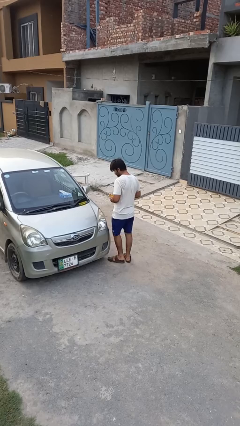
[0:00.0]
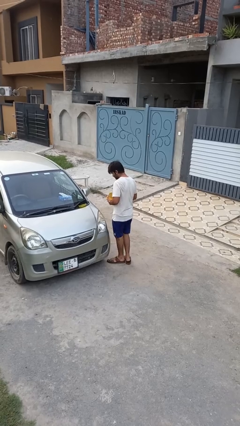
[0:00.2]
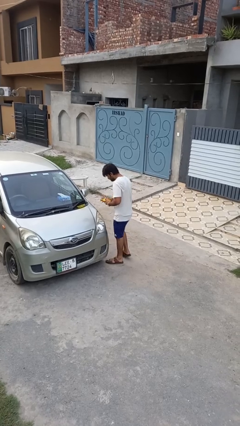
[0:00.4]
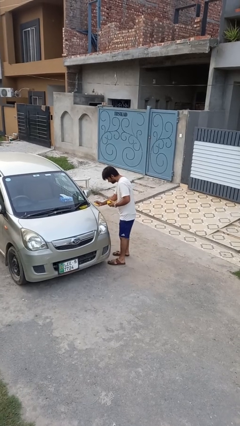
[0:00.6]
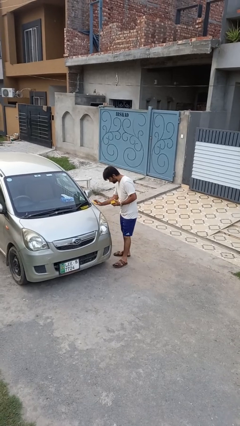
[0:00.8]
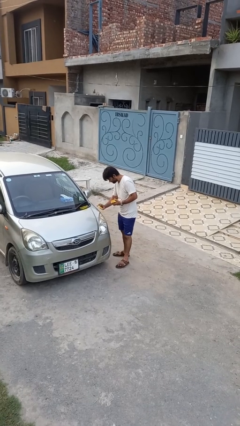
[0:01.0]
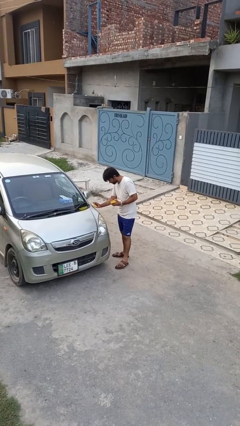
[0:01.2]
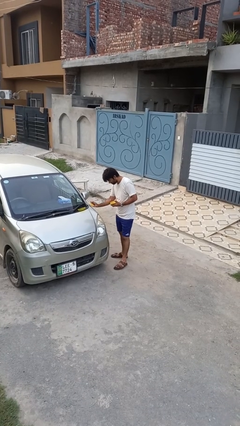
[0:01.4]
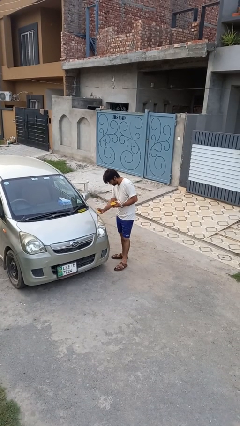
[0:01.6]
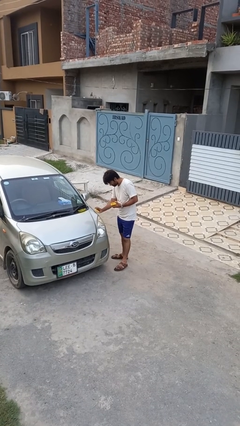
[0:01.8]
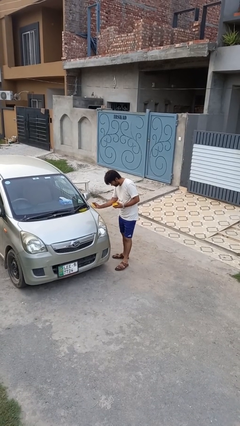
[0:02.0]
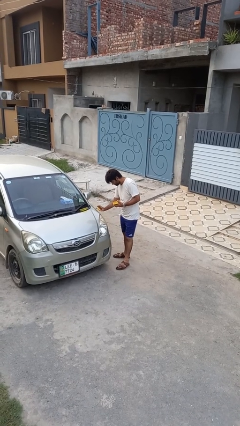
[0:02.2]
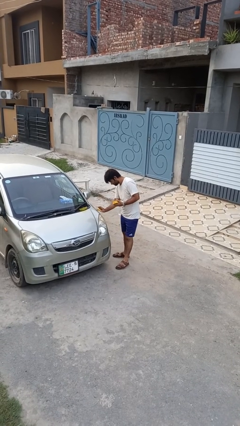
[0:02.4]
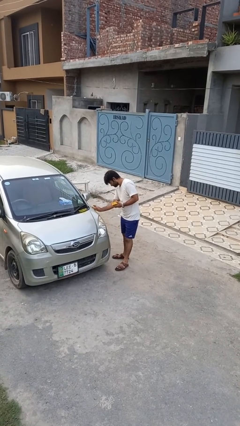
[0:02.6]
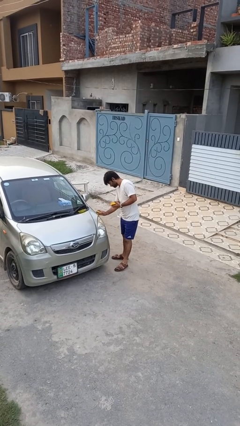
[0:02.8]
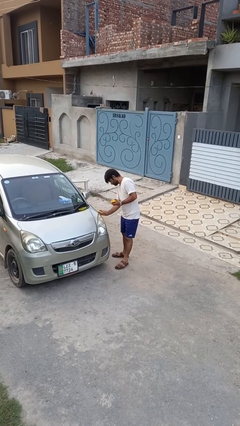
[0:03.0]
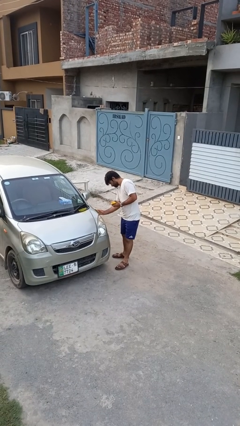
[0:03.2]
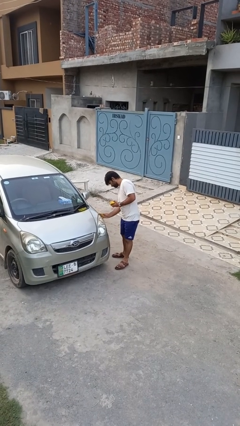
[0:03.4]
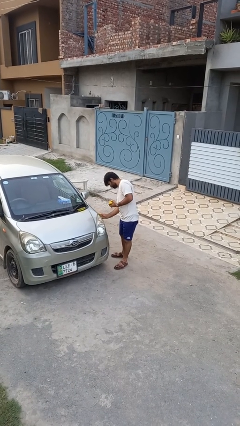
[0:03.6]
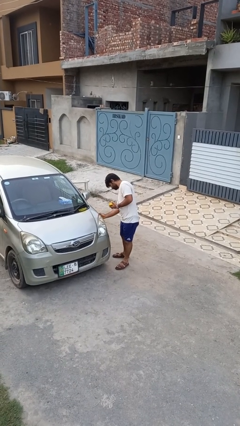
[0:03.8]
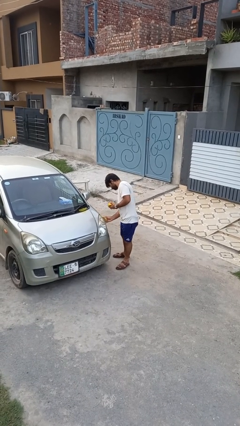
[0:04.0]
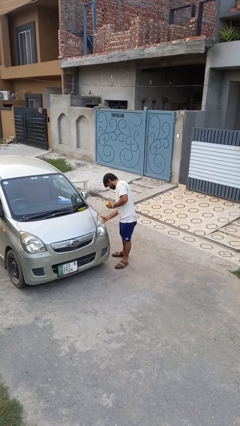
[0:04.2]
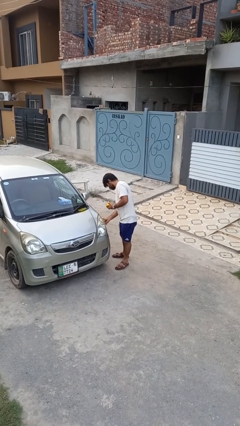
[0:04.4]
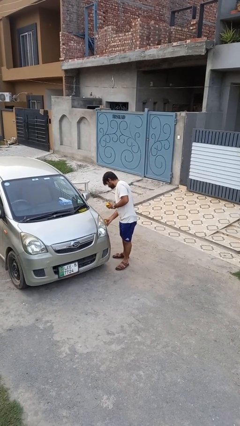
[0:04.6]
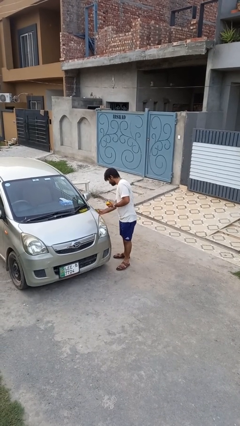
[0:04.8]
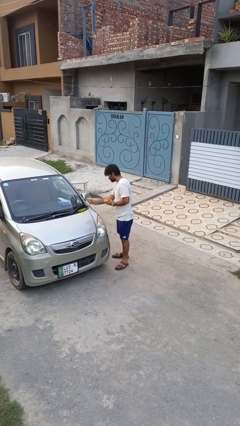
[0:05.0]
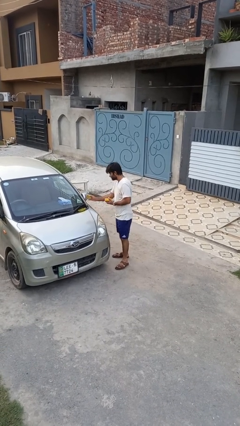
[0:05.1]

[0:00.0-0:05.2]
person polishes car with rag

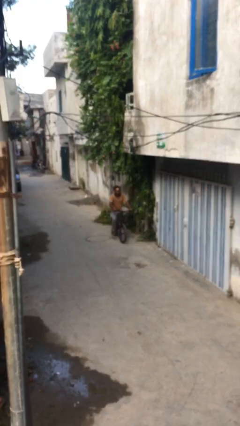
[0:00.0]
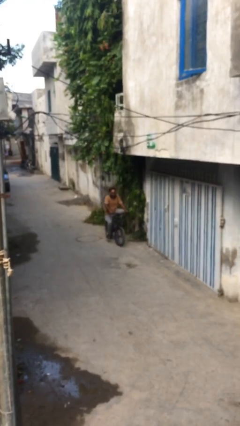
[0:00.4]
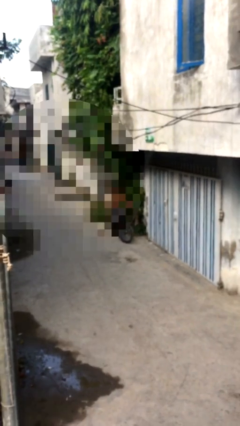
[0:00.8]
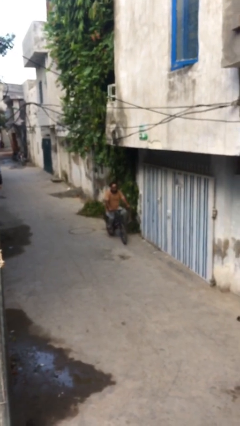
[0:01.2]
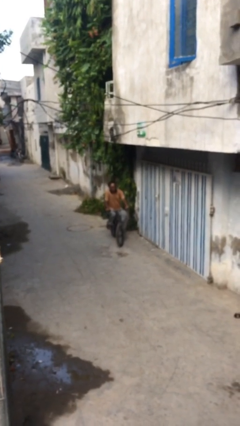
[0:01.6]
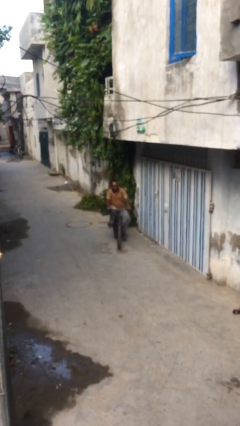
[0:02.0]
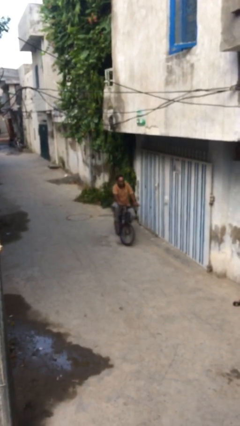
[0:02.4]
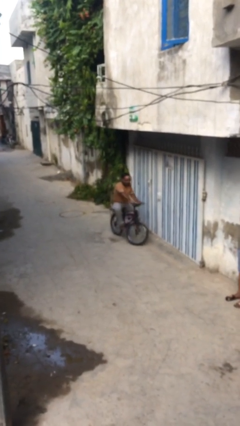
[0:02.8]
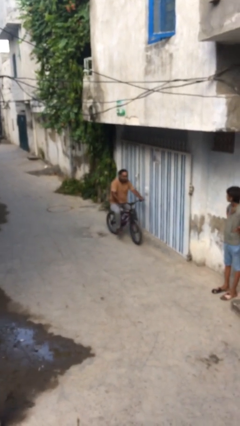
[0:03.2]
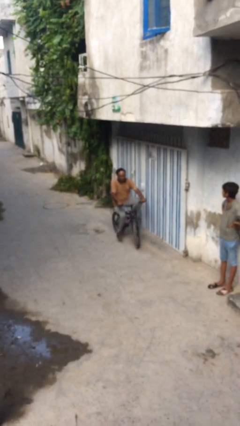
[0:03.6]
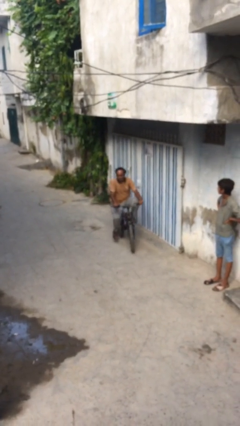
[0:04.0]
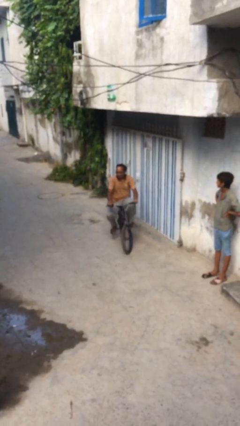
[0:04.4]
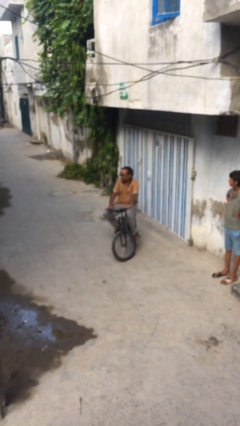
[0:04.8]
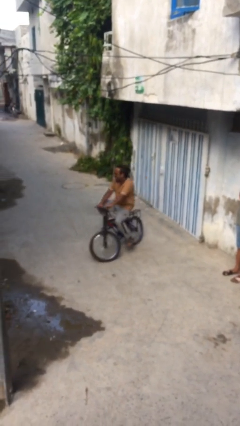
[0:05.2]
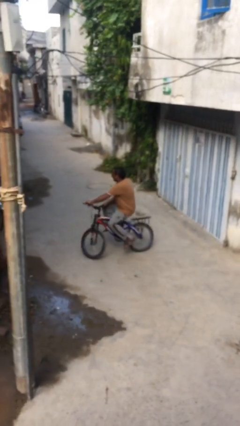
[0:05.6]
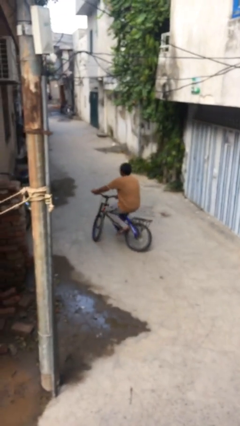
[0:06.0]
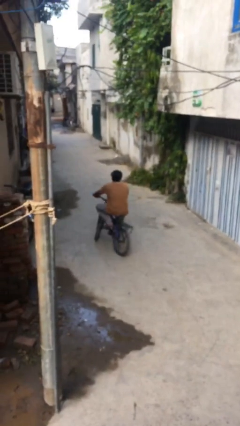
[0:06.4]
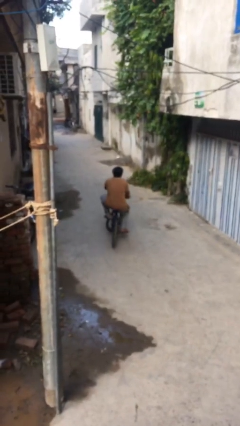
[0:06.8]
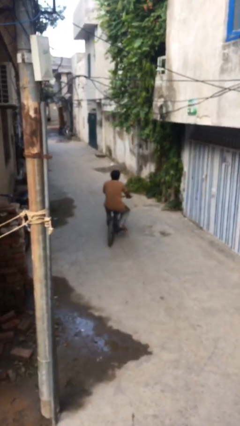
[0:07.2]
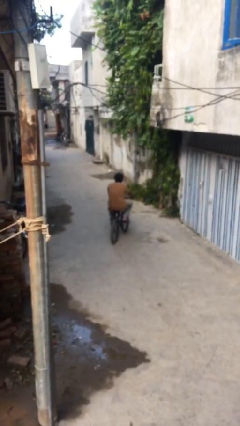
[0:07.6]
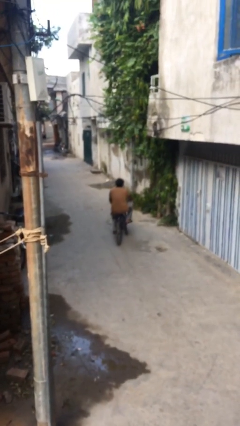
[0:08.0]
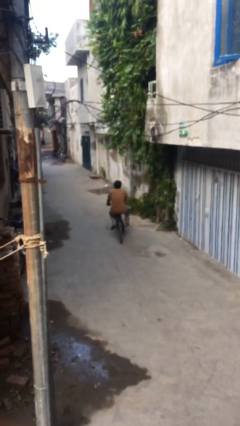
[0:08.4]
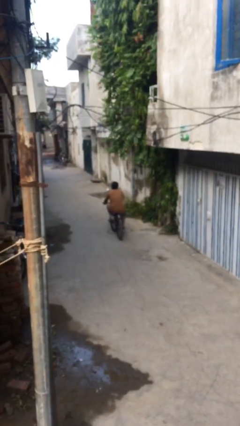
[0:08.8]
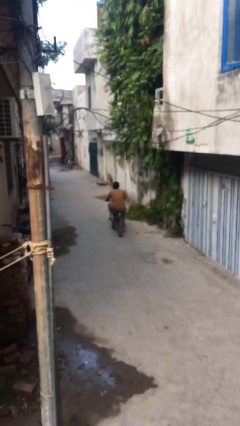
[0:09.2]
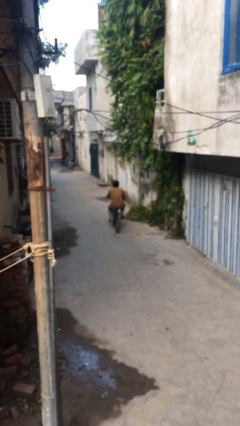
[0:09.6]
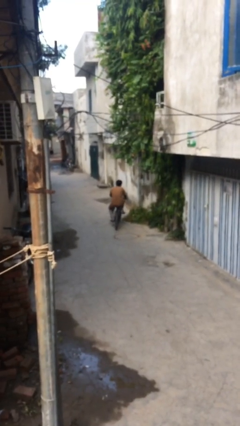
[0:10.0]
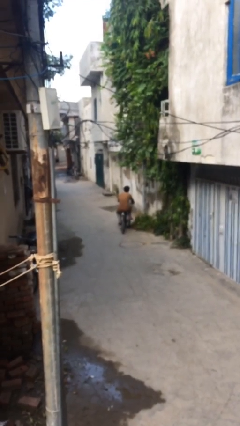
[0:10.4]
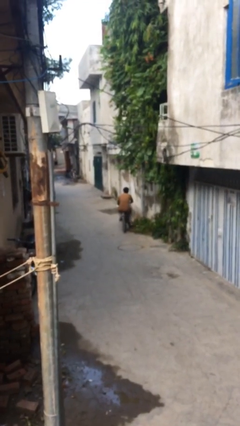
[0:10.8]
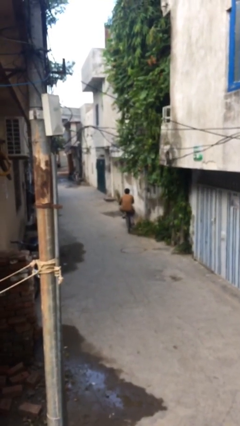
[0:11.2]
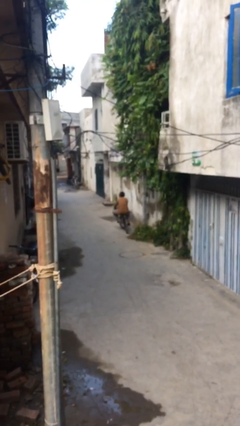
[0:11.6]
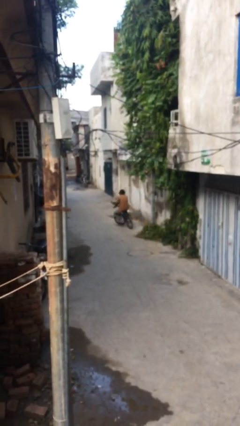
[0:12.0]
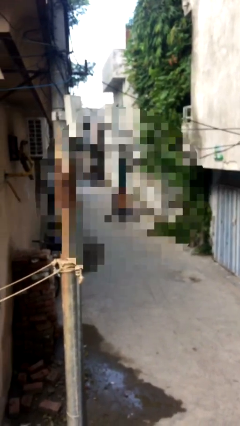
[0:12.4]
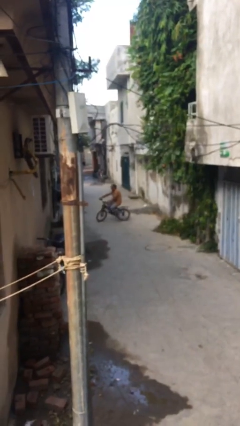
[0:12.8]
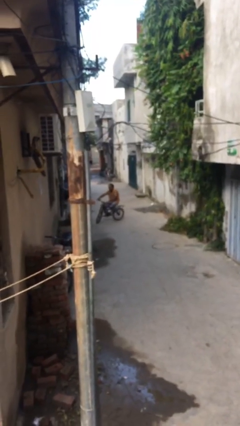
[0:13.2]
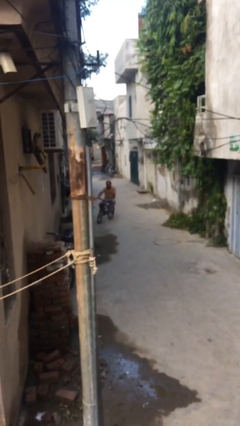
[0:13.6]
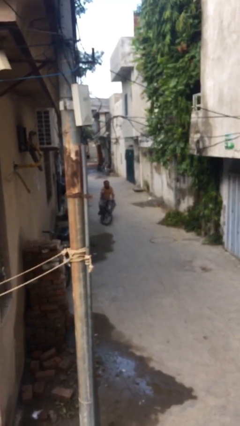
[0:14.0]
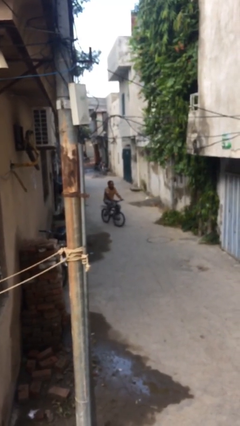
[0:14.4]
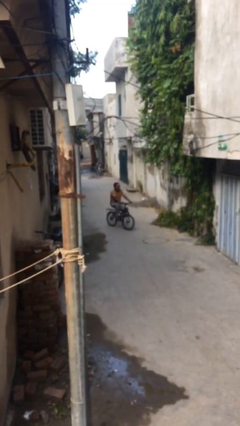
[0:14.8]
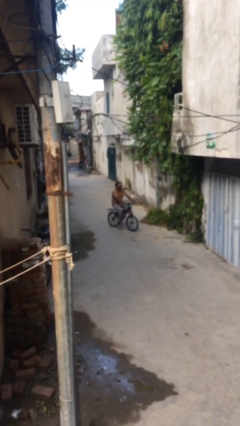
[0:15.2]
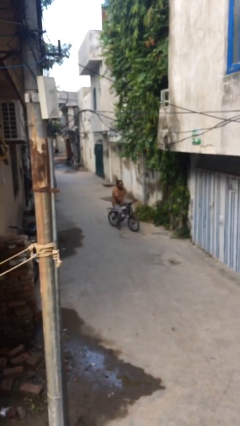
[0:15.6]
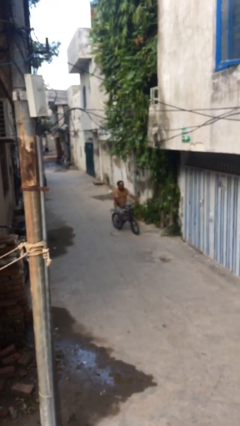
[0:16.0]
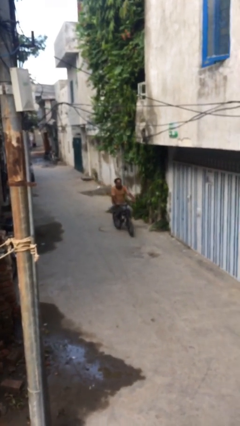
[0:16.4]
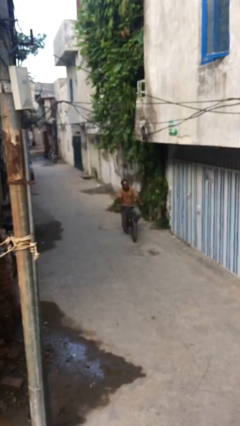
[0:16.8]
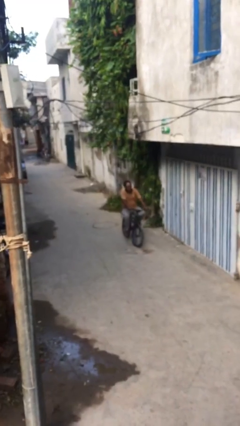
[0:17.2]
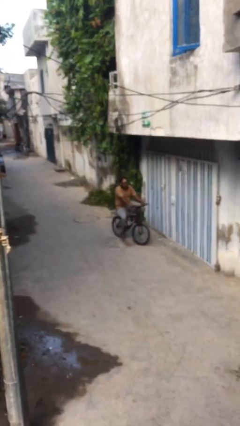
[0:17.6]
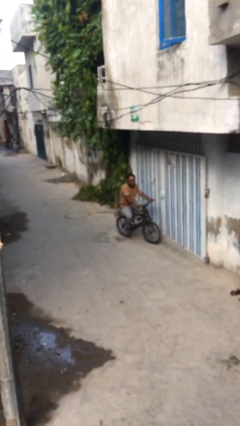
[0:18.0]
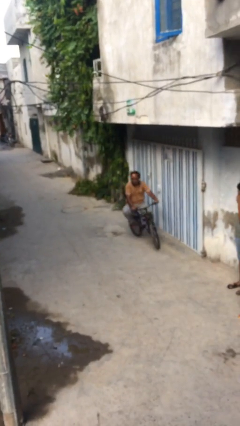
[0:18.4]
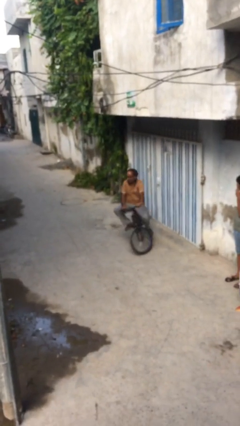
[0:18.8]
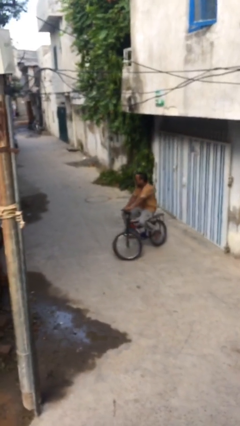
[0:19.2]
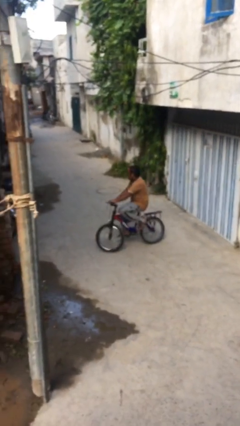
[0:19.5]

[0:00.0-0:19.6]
person rides bicycle

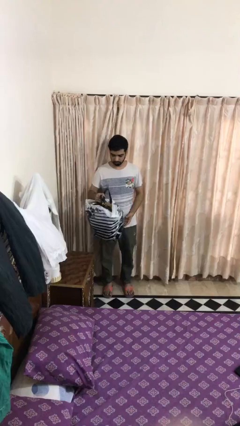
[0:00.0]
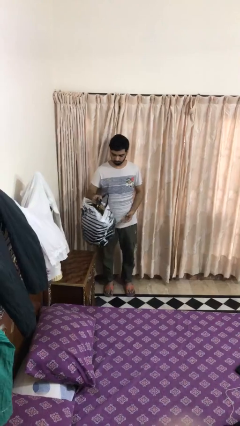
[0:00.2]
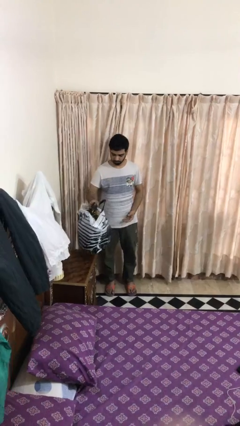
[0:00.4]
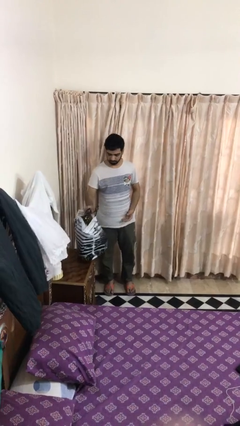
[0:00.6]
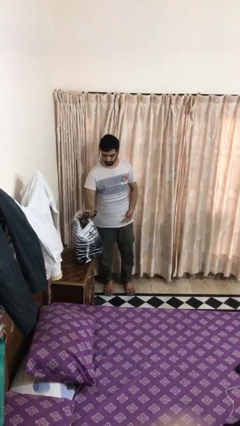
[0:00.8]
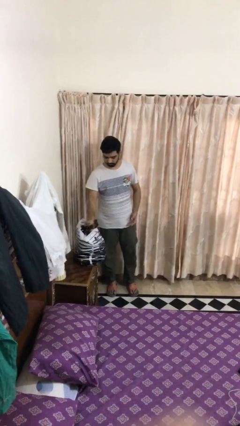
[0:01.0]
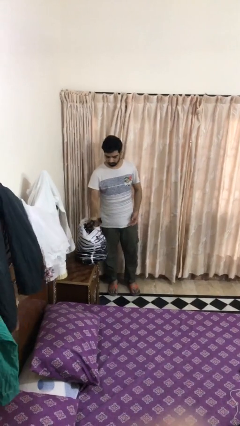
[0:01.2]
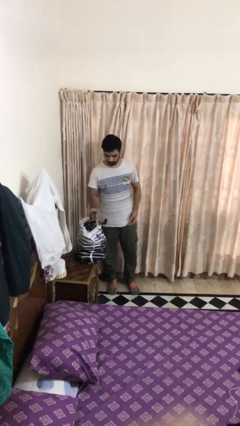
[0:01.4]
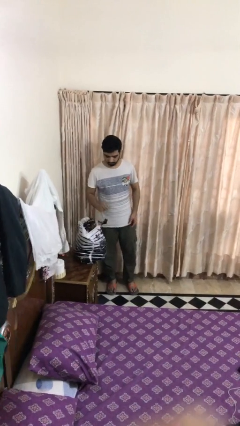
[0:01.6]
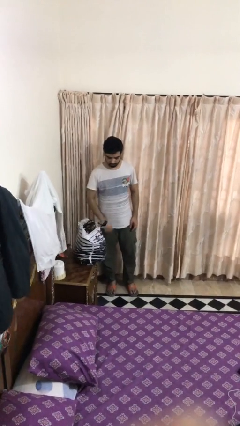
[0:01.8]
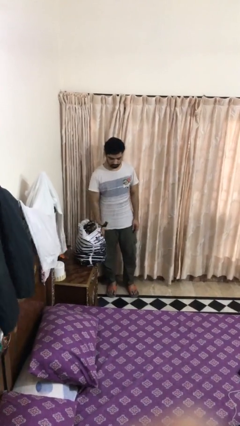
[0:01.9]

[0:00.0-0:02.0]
person puts down object on table

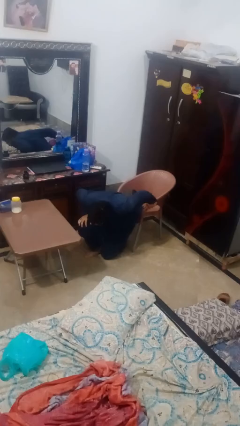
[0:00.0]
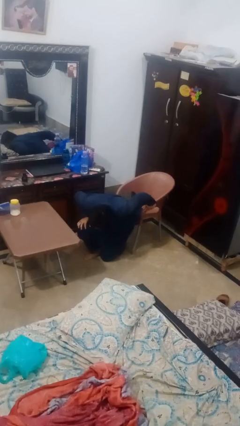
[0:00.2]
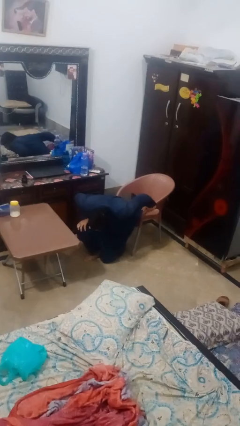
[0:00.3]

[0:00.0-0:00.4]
person stands up from floor

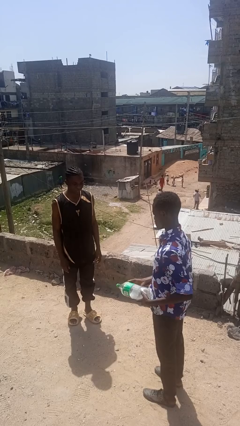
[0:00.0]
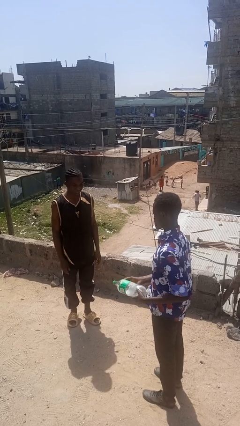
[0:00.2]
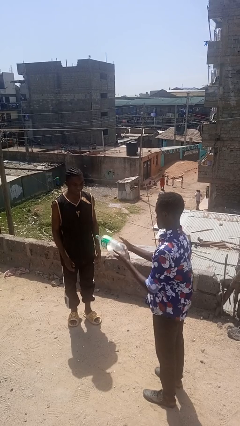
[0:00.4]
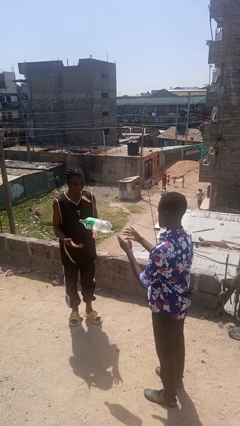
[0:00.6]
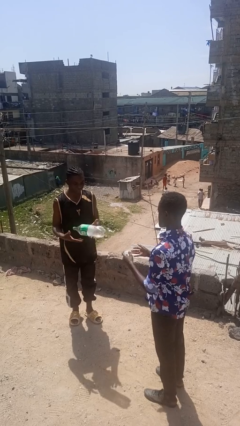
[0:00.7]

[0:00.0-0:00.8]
person throws object to person
